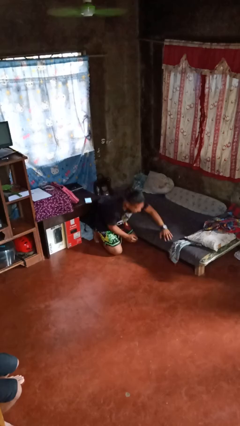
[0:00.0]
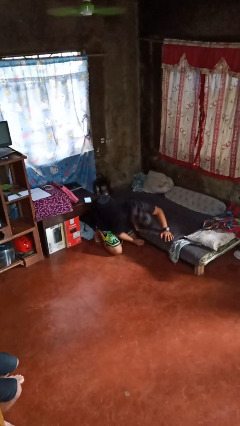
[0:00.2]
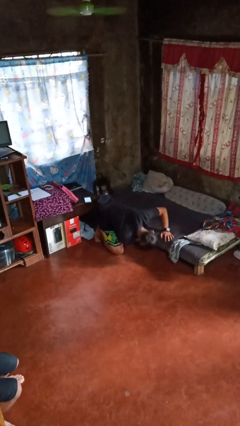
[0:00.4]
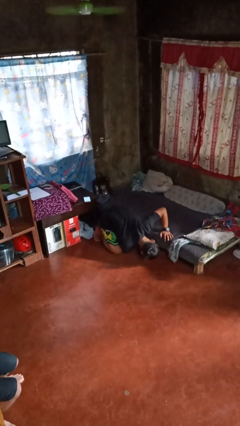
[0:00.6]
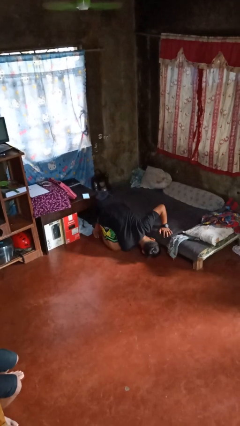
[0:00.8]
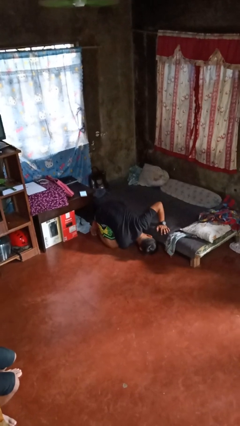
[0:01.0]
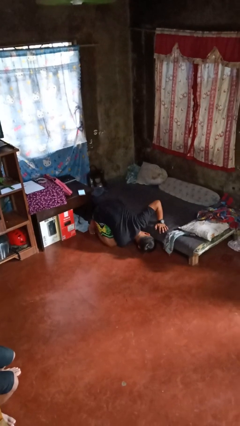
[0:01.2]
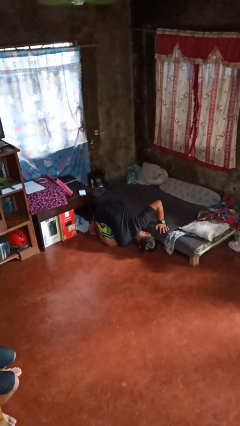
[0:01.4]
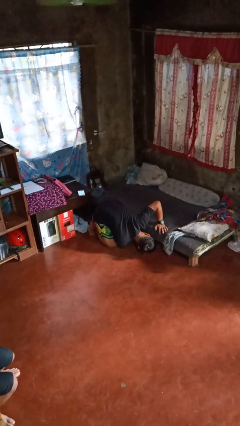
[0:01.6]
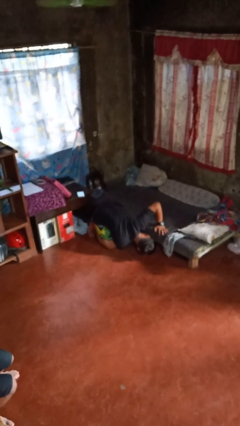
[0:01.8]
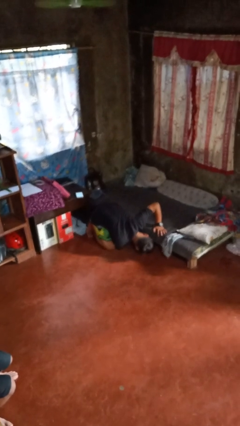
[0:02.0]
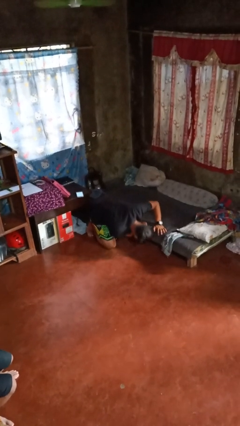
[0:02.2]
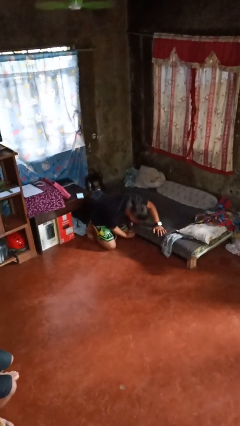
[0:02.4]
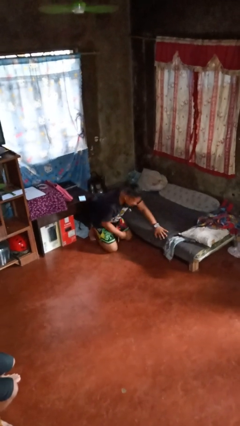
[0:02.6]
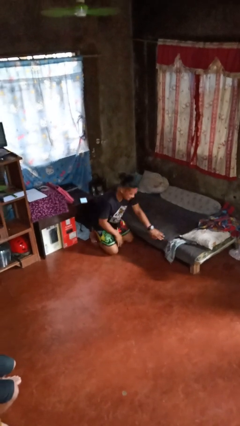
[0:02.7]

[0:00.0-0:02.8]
person searches under bed

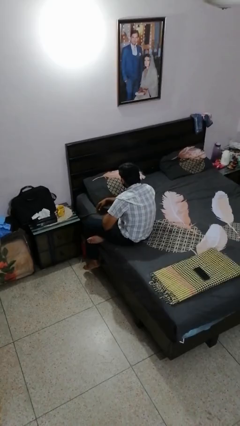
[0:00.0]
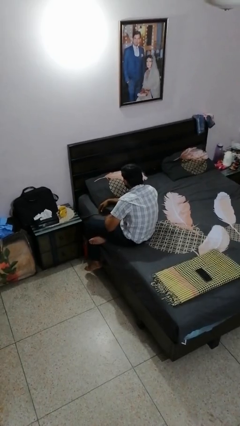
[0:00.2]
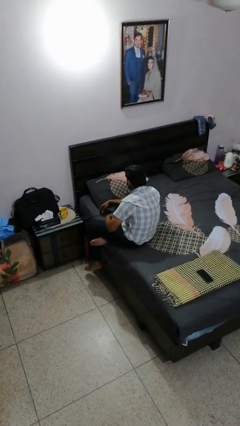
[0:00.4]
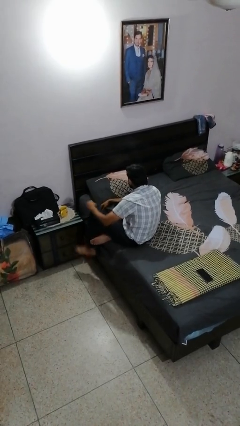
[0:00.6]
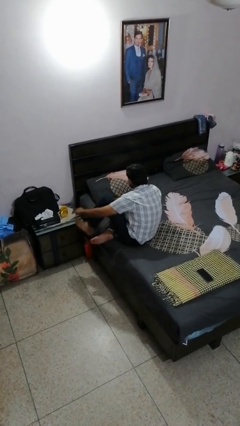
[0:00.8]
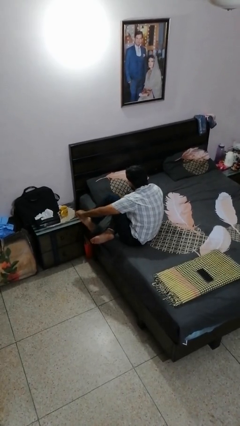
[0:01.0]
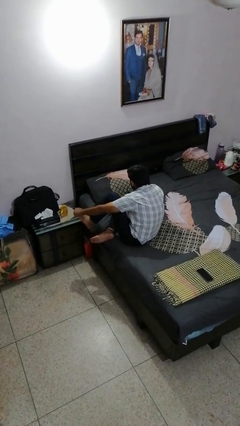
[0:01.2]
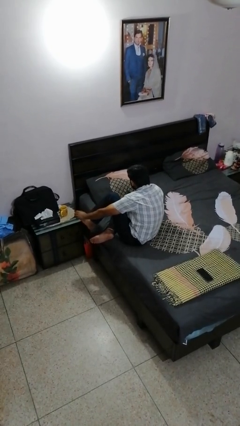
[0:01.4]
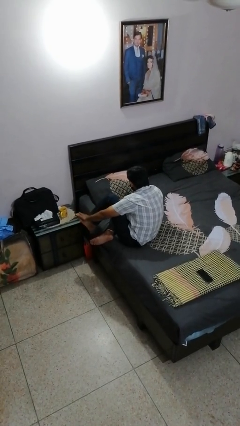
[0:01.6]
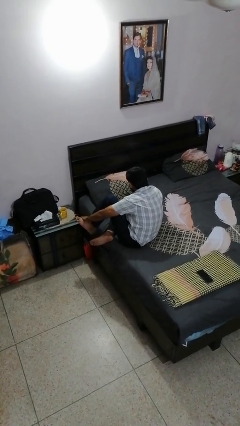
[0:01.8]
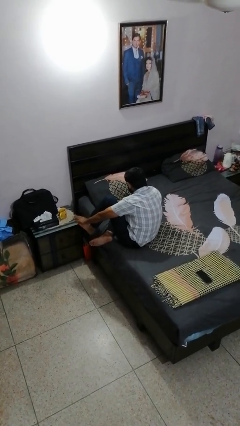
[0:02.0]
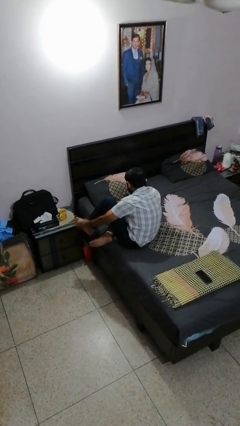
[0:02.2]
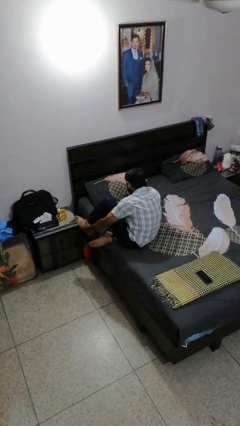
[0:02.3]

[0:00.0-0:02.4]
person rubs foot

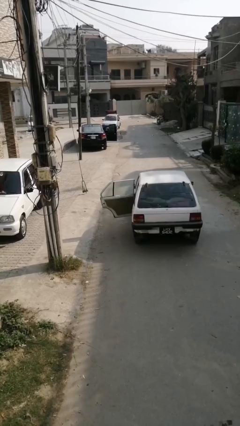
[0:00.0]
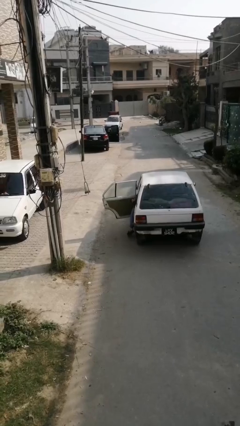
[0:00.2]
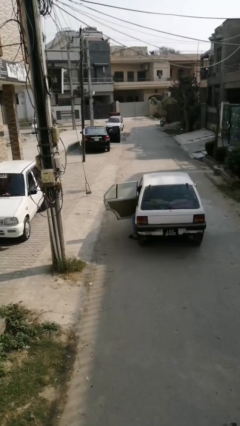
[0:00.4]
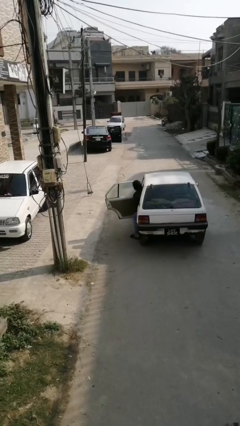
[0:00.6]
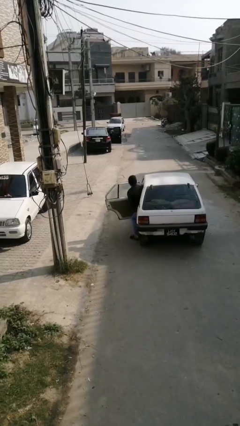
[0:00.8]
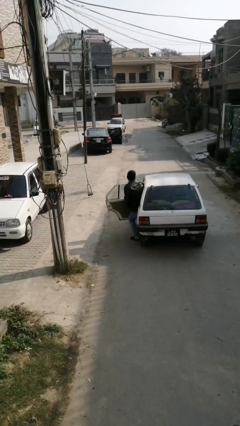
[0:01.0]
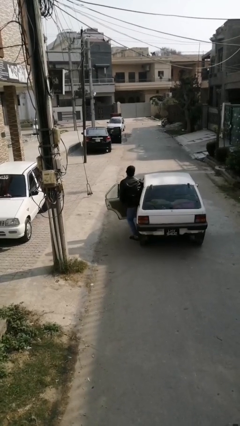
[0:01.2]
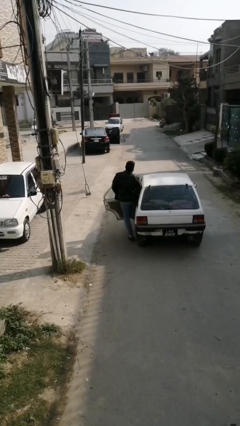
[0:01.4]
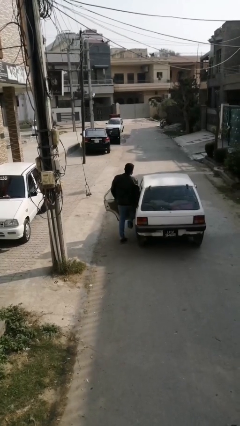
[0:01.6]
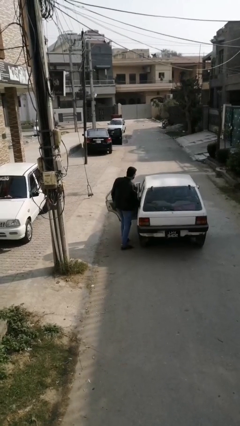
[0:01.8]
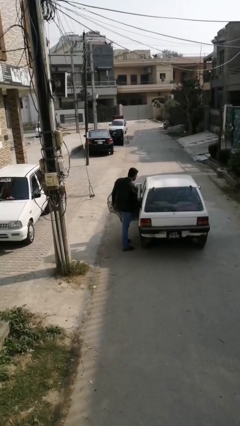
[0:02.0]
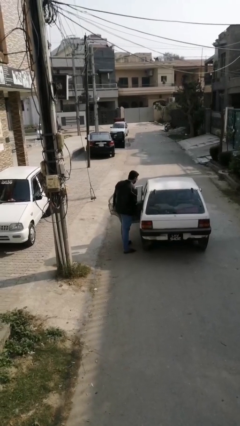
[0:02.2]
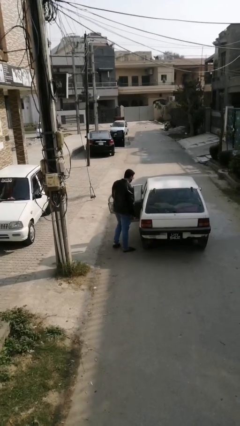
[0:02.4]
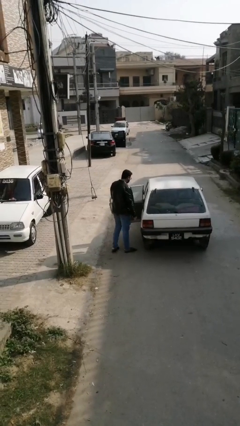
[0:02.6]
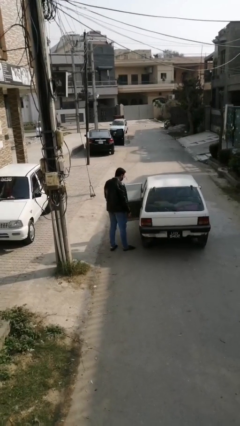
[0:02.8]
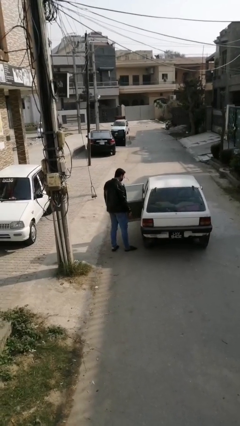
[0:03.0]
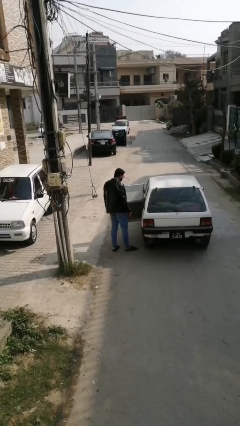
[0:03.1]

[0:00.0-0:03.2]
person exits car

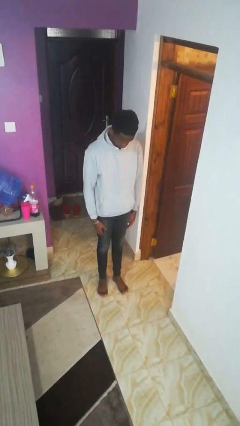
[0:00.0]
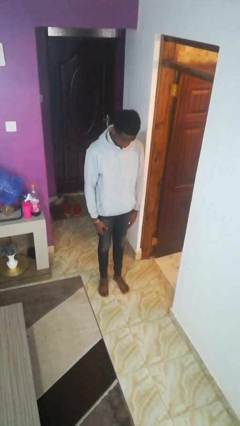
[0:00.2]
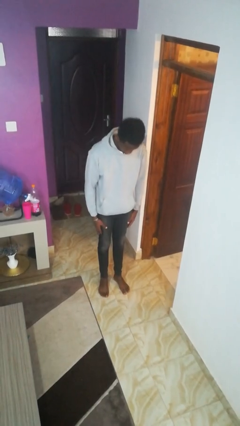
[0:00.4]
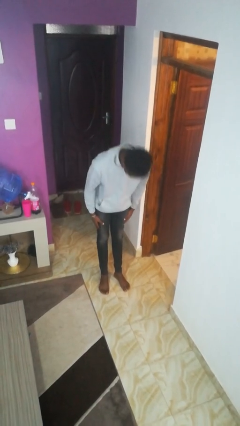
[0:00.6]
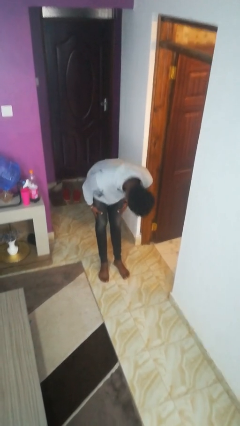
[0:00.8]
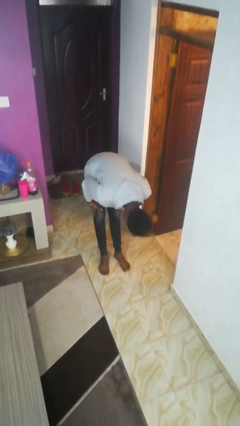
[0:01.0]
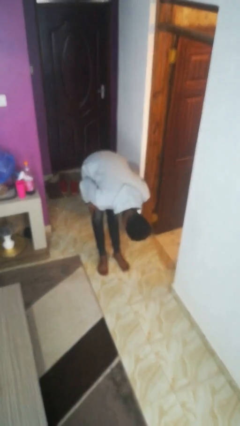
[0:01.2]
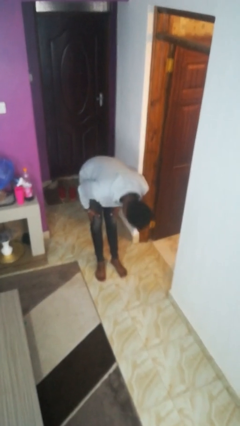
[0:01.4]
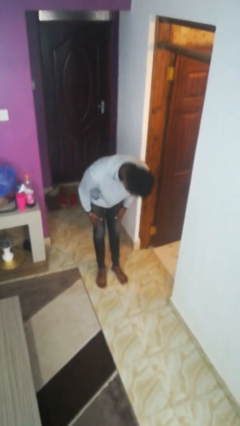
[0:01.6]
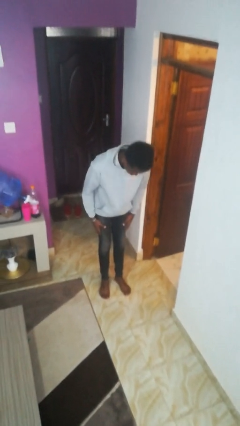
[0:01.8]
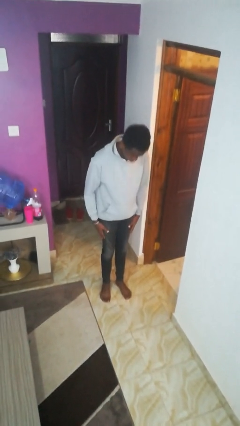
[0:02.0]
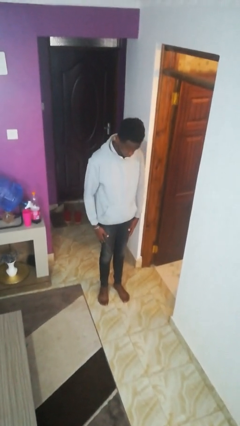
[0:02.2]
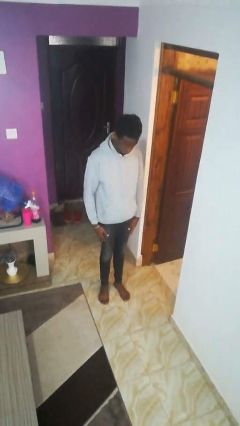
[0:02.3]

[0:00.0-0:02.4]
person bows

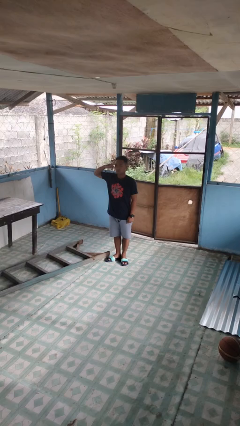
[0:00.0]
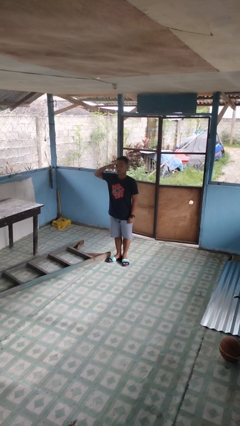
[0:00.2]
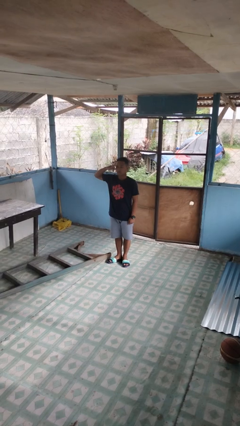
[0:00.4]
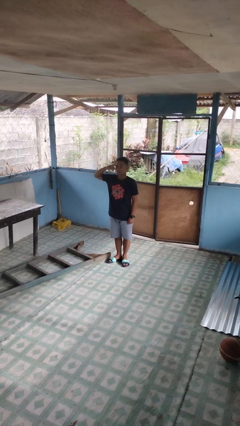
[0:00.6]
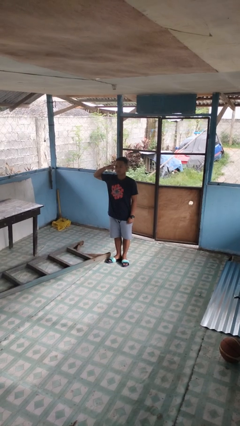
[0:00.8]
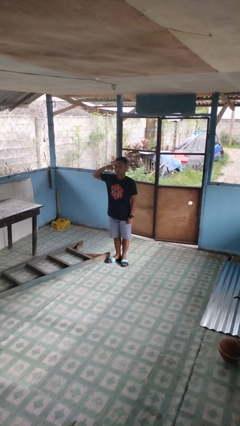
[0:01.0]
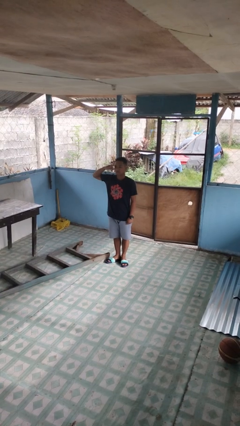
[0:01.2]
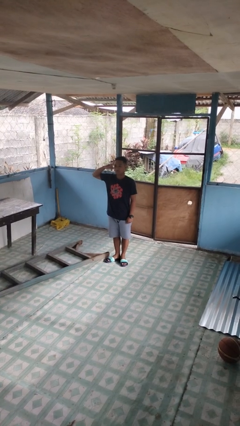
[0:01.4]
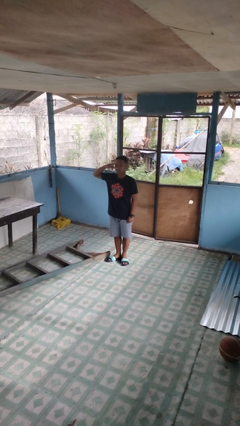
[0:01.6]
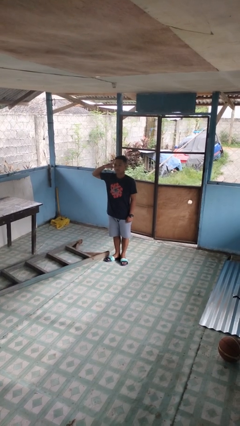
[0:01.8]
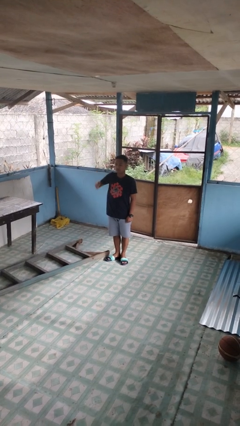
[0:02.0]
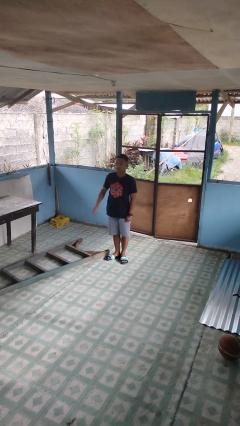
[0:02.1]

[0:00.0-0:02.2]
person salutes

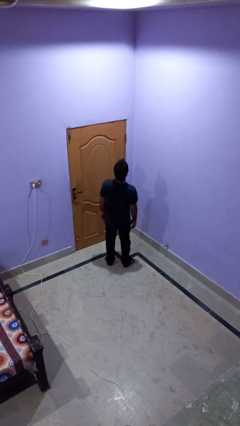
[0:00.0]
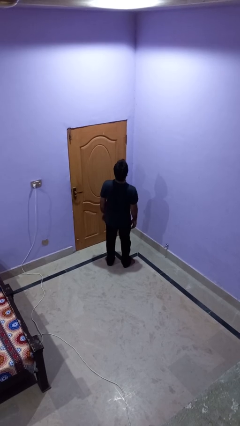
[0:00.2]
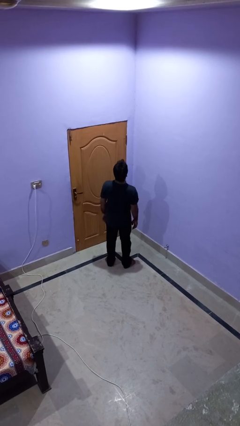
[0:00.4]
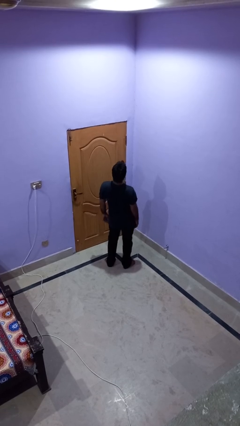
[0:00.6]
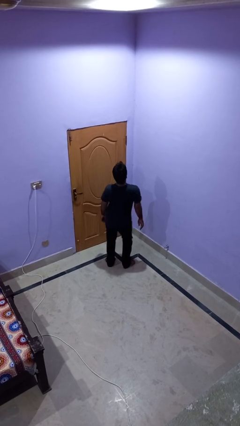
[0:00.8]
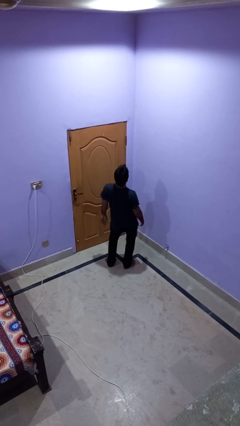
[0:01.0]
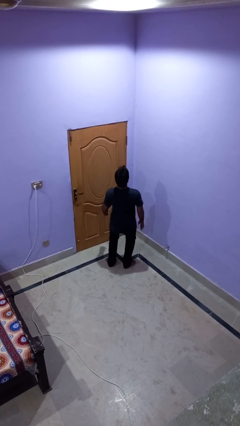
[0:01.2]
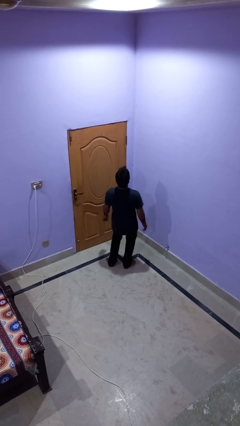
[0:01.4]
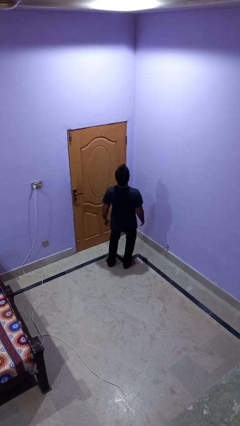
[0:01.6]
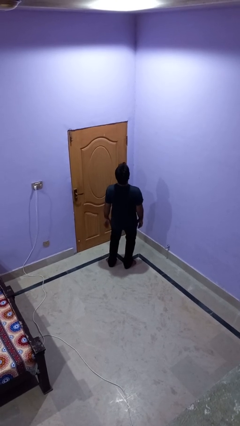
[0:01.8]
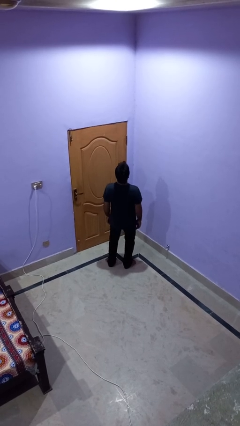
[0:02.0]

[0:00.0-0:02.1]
person wiggles hips

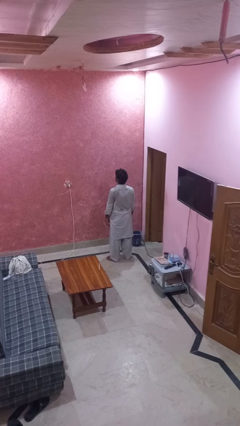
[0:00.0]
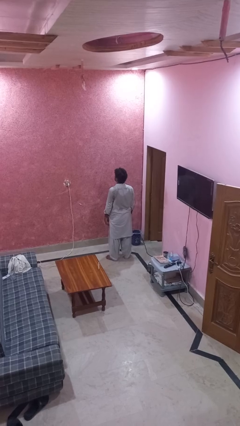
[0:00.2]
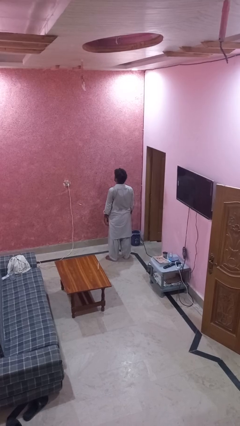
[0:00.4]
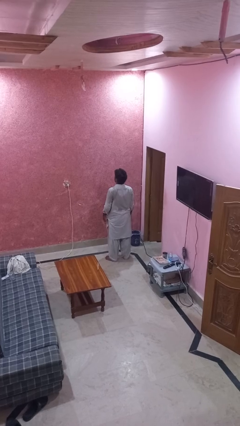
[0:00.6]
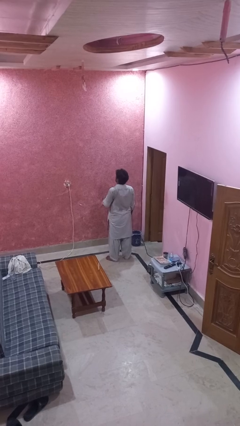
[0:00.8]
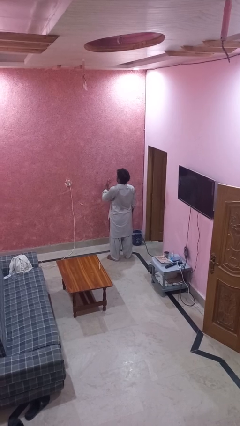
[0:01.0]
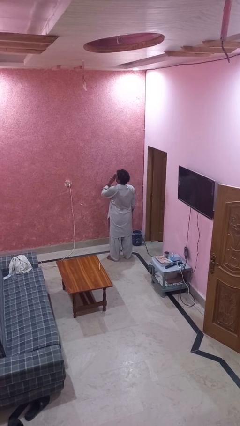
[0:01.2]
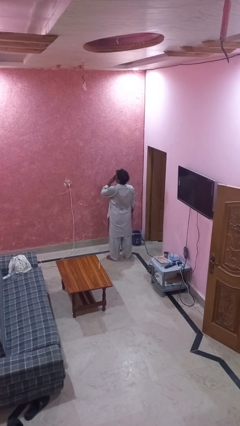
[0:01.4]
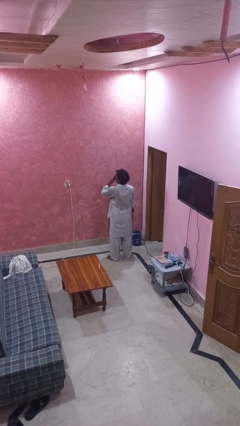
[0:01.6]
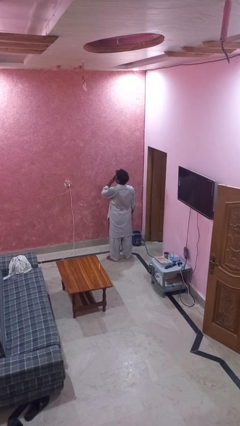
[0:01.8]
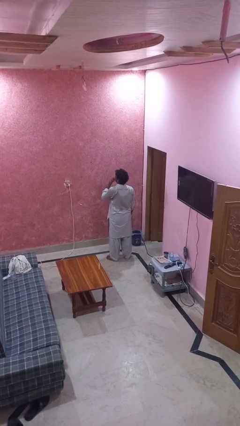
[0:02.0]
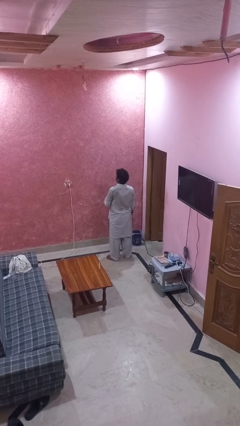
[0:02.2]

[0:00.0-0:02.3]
person yawns
